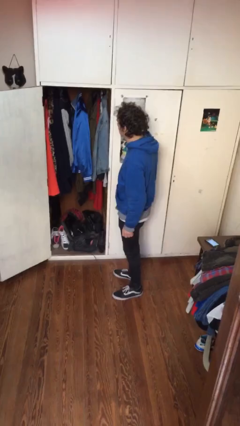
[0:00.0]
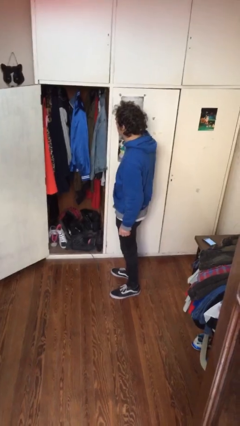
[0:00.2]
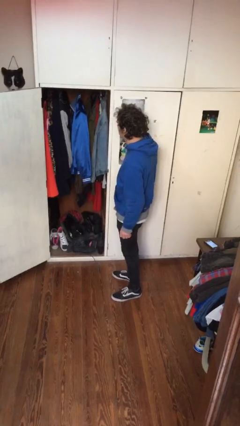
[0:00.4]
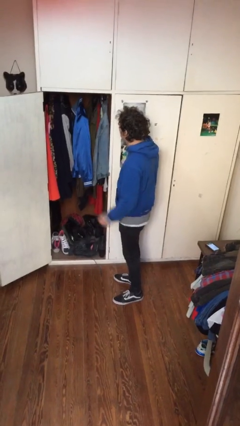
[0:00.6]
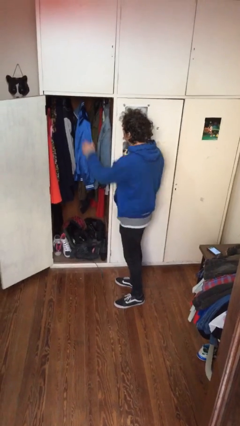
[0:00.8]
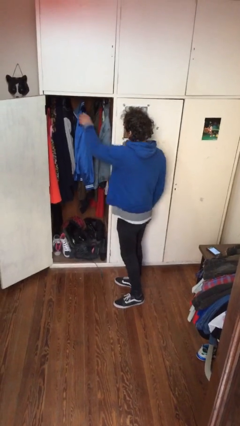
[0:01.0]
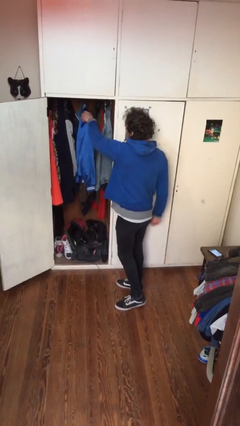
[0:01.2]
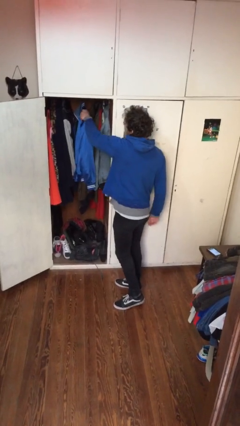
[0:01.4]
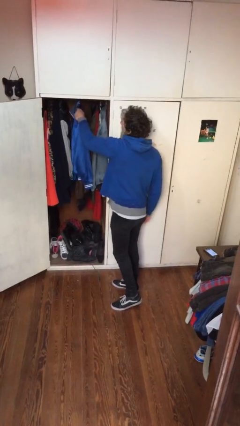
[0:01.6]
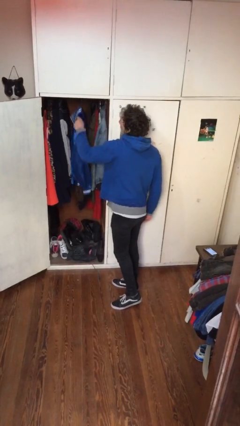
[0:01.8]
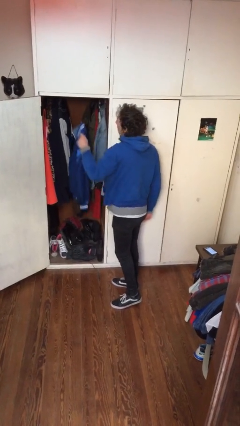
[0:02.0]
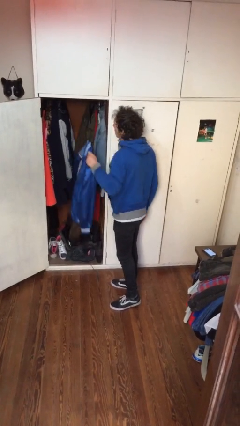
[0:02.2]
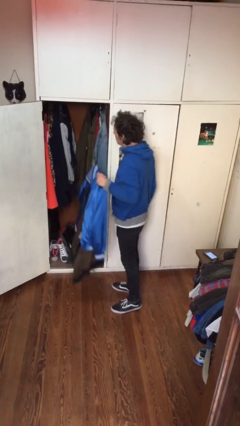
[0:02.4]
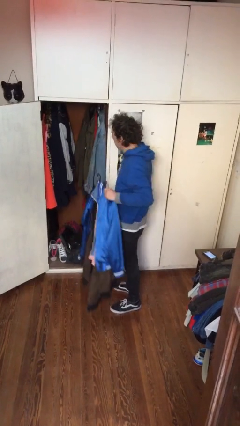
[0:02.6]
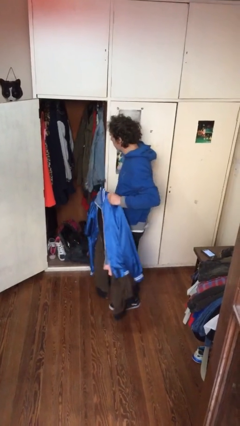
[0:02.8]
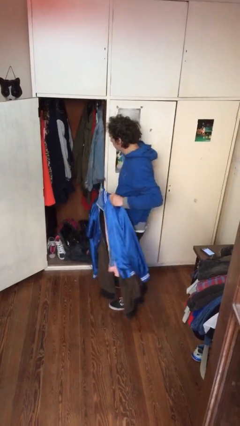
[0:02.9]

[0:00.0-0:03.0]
person takes clothes from closet

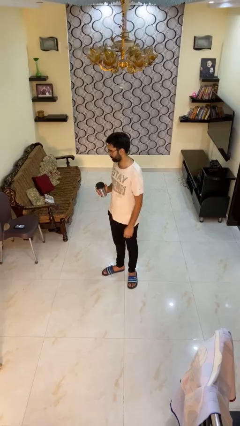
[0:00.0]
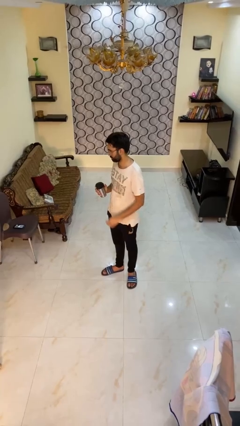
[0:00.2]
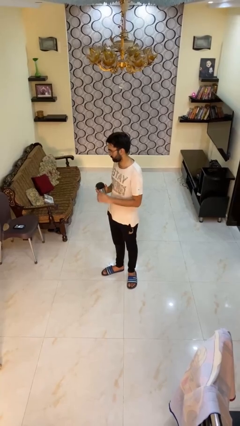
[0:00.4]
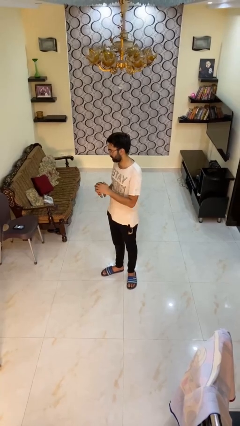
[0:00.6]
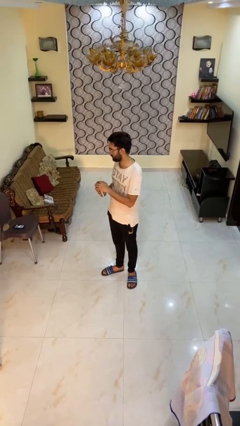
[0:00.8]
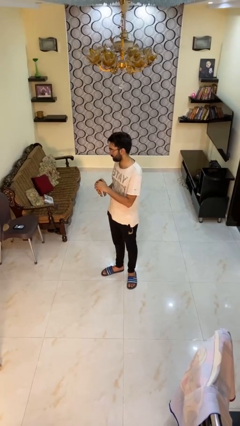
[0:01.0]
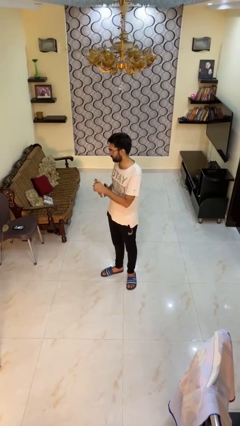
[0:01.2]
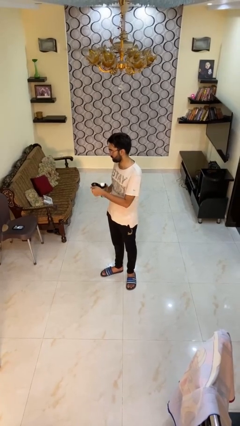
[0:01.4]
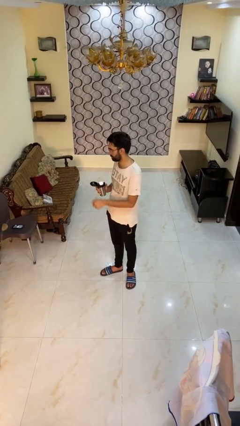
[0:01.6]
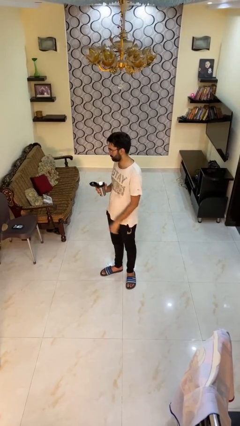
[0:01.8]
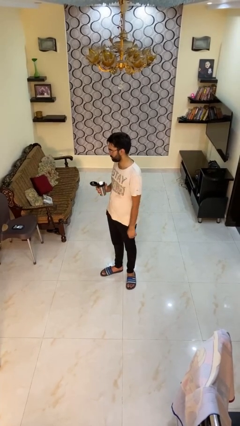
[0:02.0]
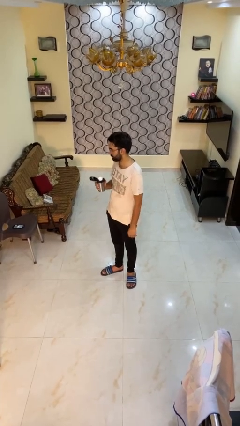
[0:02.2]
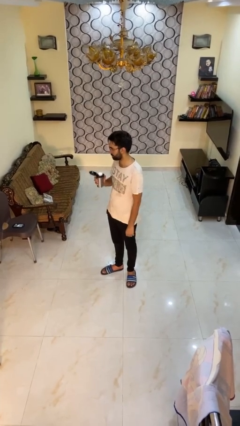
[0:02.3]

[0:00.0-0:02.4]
person opens beverage can

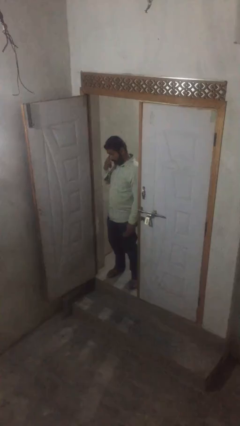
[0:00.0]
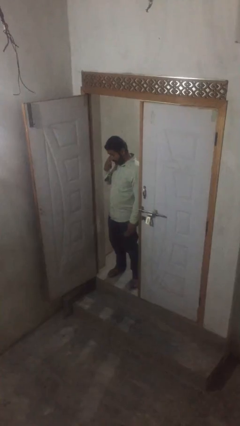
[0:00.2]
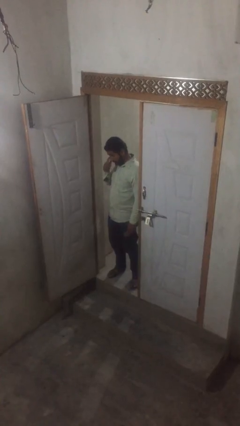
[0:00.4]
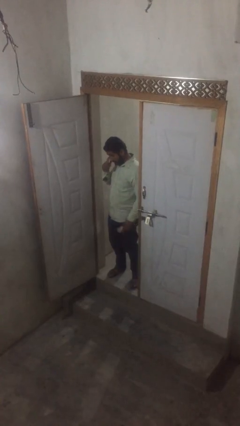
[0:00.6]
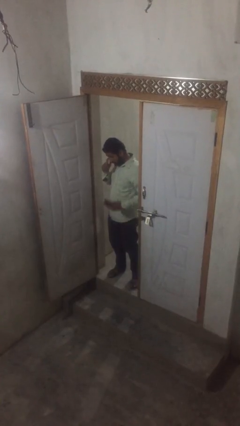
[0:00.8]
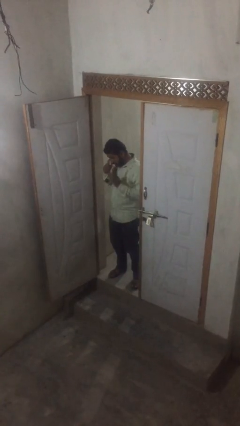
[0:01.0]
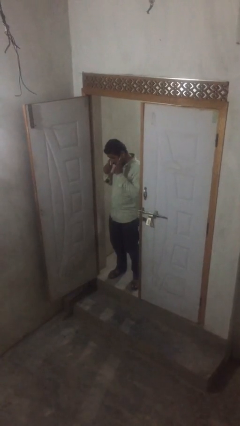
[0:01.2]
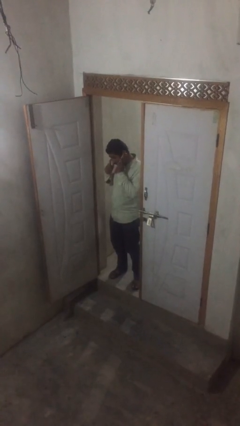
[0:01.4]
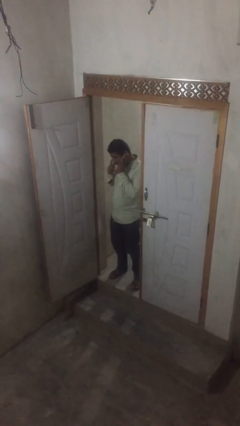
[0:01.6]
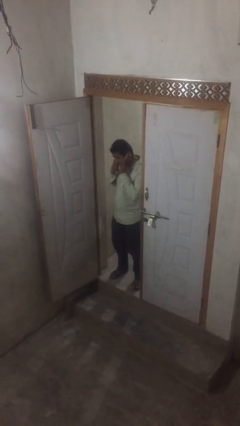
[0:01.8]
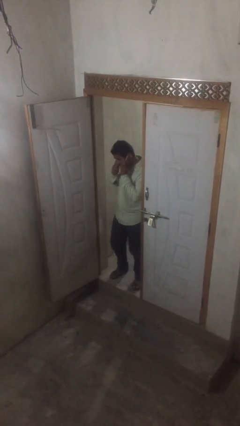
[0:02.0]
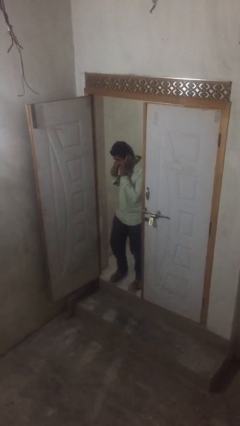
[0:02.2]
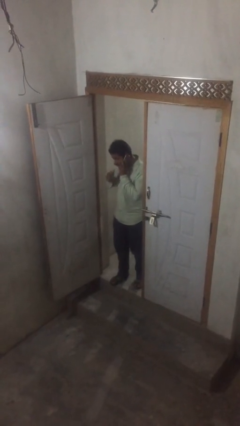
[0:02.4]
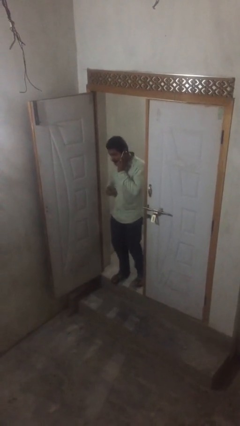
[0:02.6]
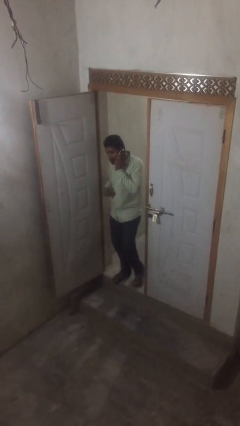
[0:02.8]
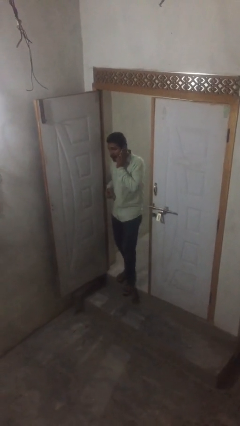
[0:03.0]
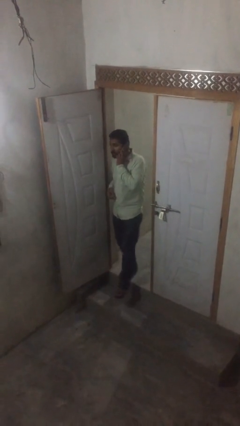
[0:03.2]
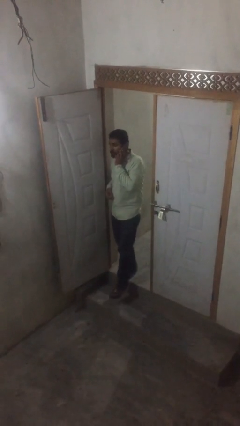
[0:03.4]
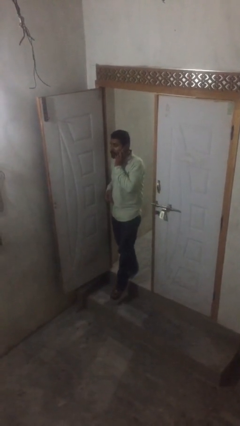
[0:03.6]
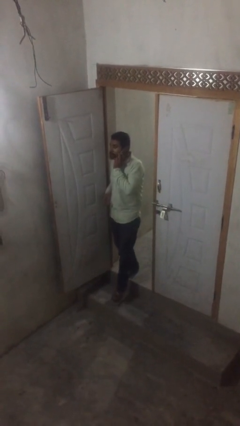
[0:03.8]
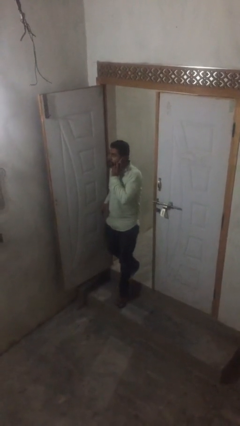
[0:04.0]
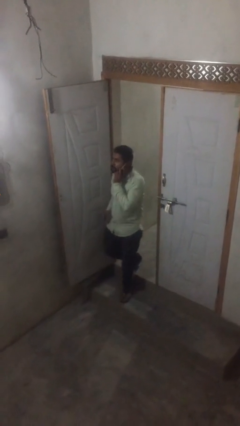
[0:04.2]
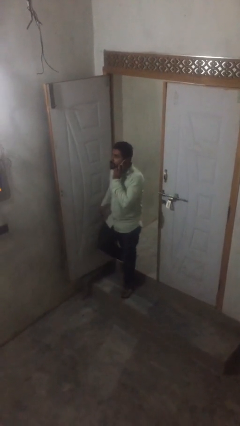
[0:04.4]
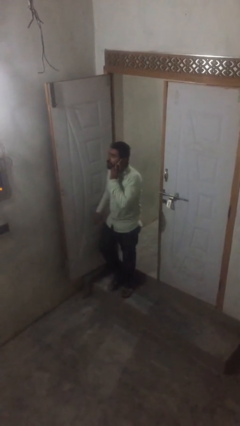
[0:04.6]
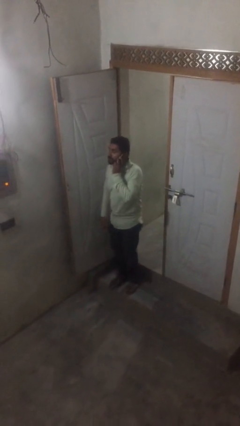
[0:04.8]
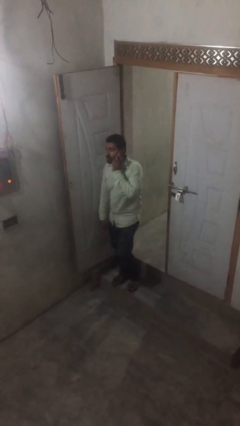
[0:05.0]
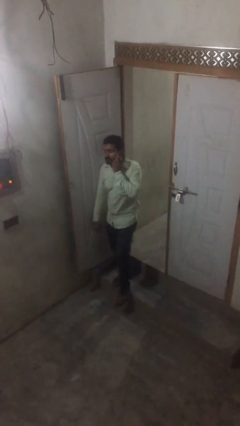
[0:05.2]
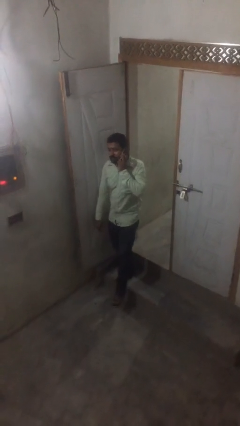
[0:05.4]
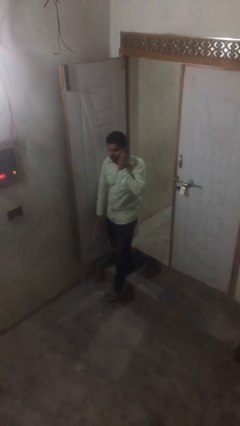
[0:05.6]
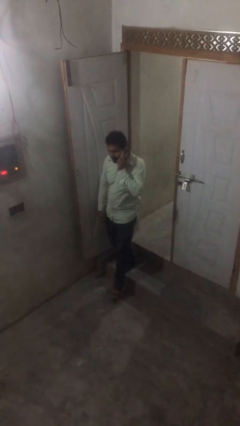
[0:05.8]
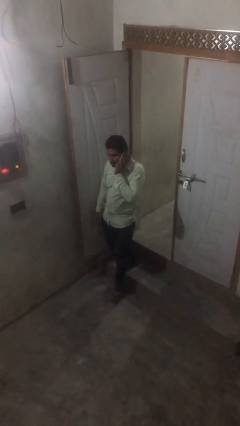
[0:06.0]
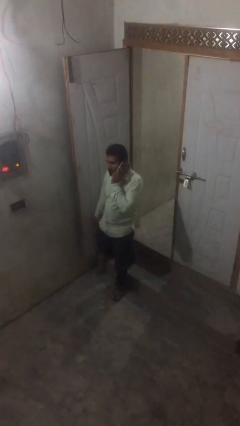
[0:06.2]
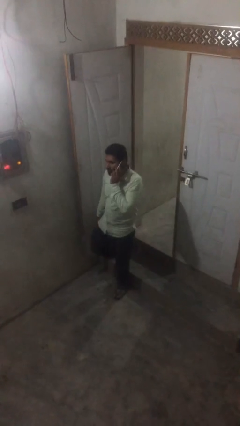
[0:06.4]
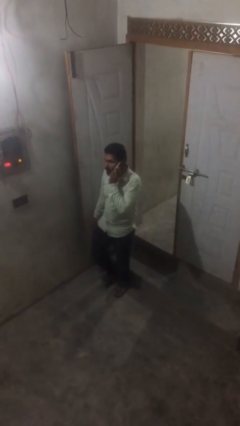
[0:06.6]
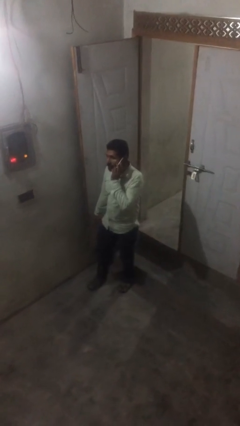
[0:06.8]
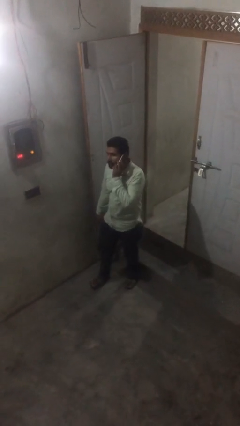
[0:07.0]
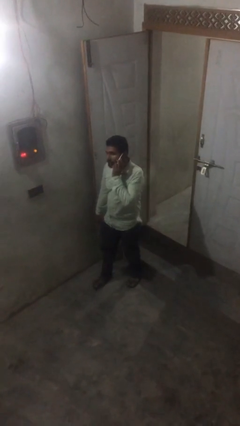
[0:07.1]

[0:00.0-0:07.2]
person enters scene through structure

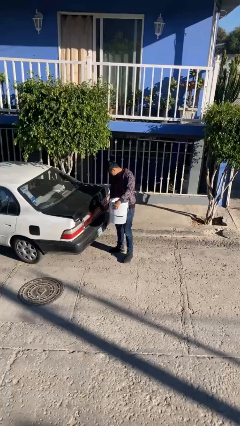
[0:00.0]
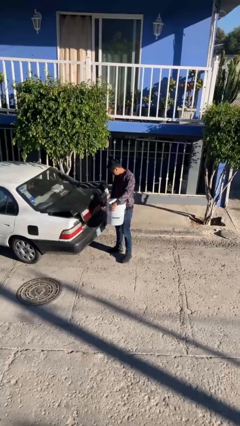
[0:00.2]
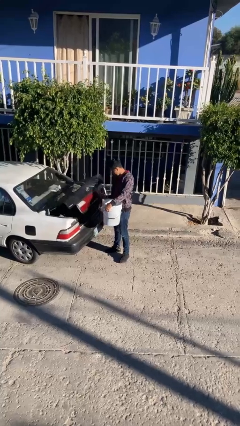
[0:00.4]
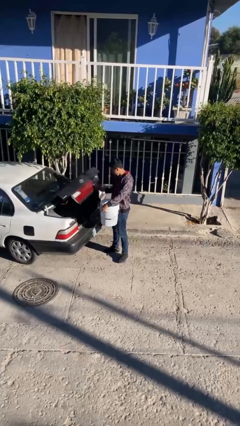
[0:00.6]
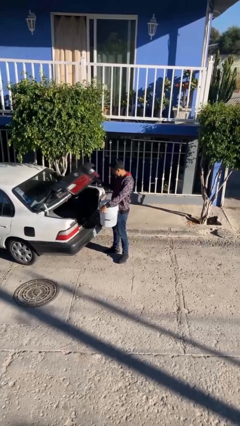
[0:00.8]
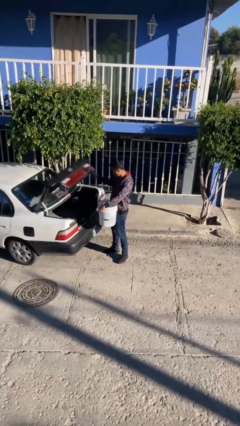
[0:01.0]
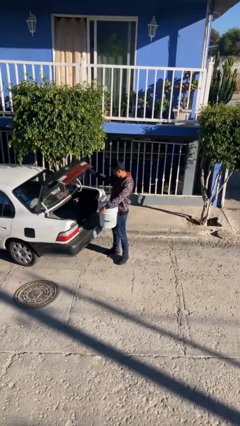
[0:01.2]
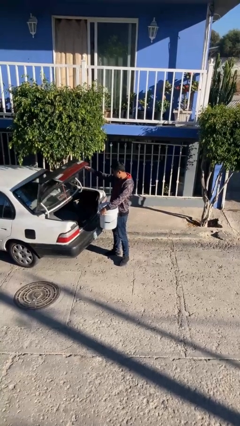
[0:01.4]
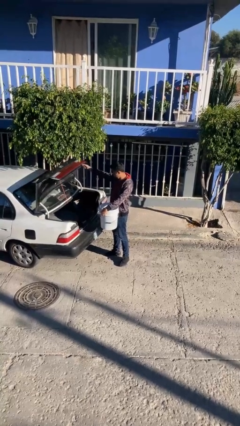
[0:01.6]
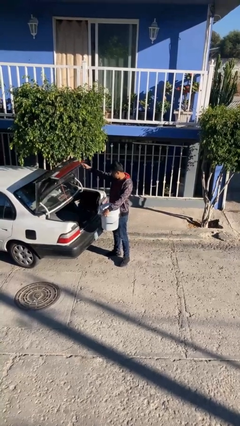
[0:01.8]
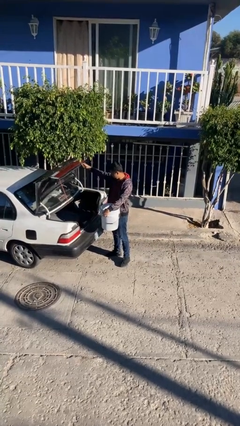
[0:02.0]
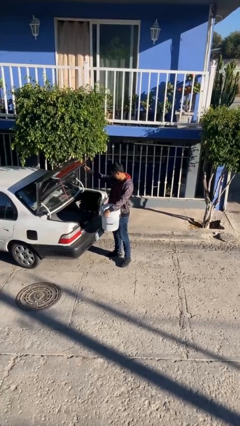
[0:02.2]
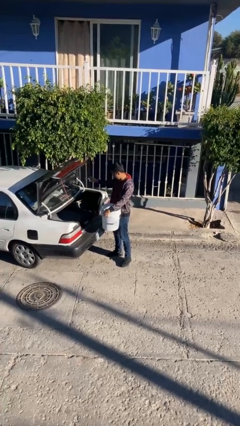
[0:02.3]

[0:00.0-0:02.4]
person opens car trunk

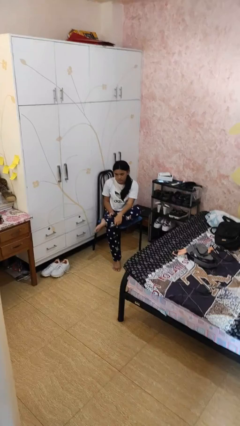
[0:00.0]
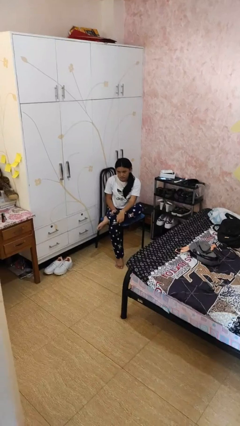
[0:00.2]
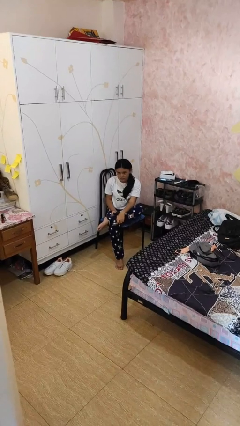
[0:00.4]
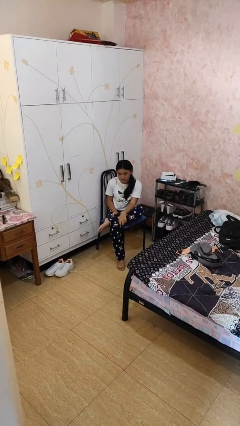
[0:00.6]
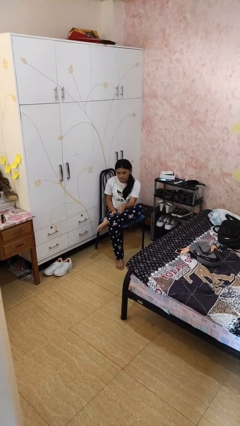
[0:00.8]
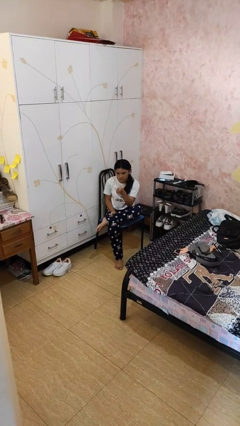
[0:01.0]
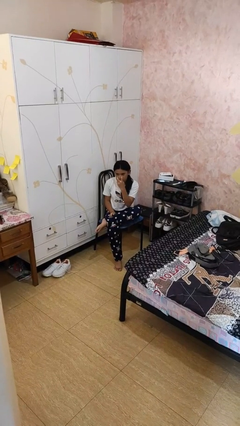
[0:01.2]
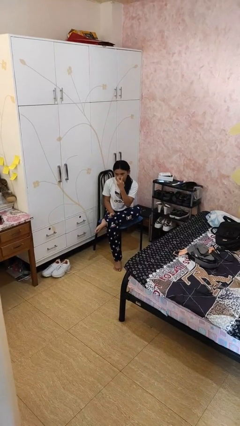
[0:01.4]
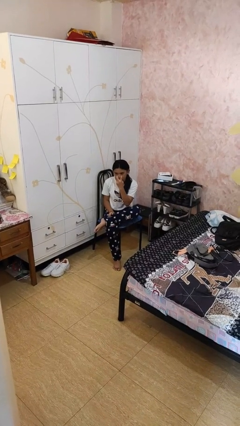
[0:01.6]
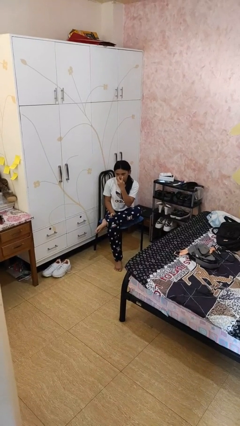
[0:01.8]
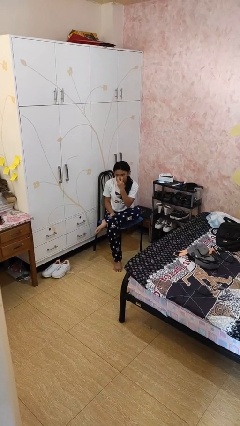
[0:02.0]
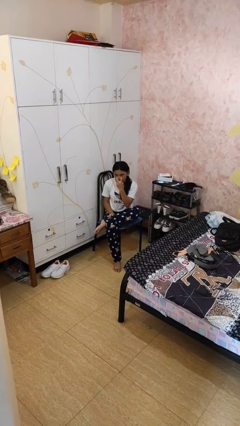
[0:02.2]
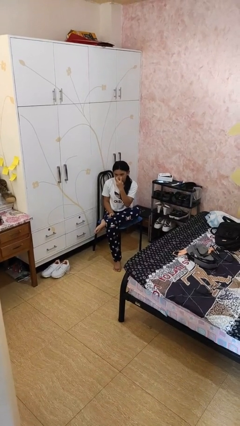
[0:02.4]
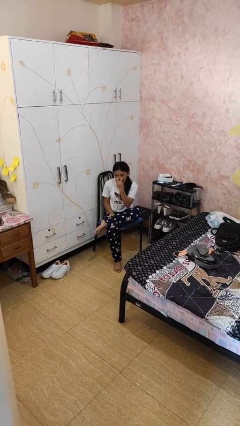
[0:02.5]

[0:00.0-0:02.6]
person gestures watch closely

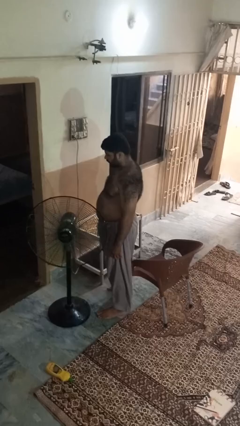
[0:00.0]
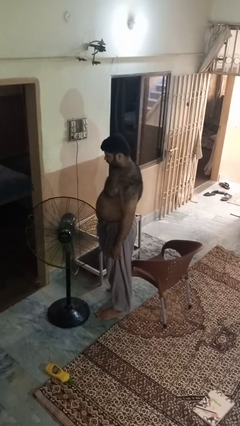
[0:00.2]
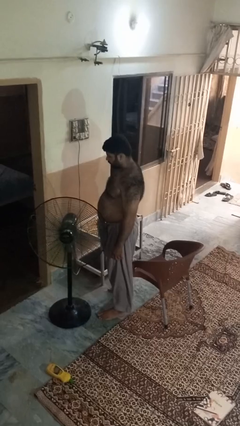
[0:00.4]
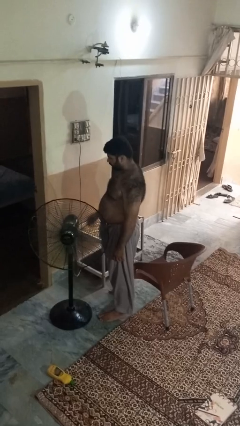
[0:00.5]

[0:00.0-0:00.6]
person turns off fan
